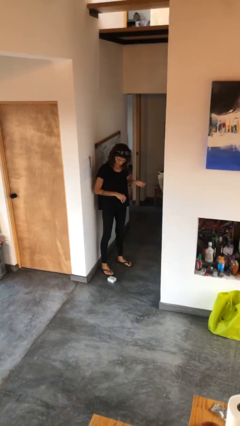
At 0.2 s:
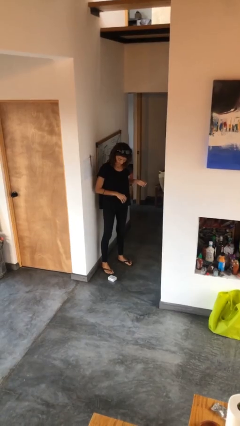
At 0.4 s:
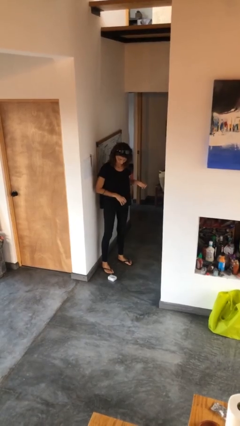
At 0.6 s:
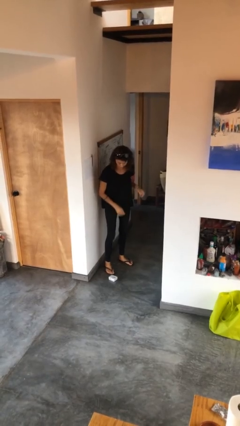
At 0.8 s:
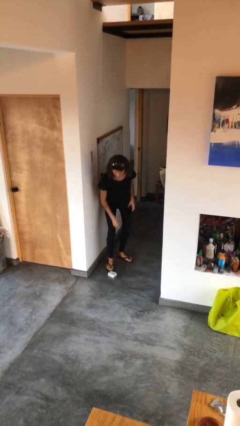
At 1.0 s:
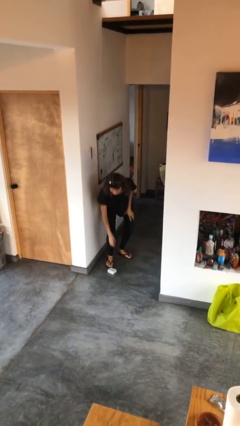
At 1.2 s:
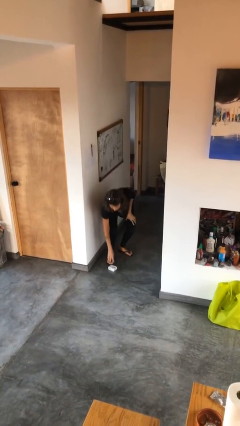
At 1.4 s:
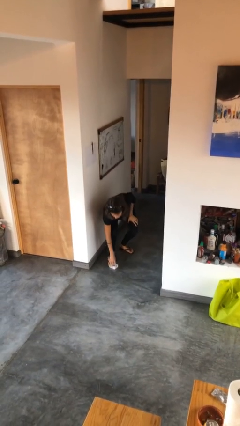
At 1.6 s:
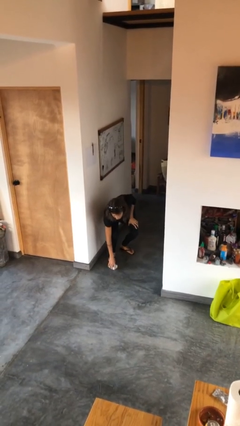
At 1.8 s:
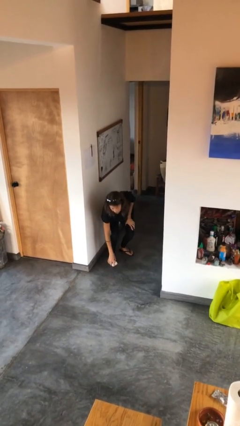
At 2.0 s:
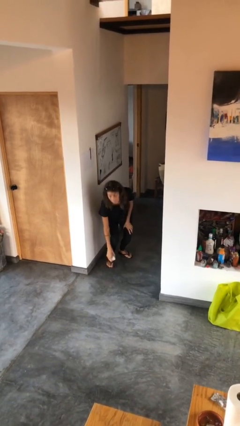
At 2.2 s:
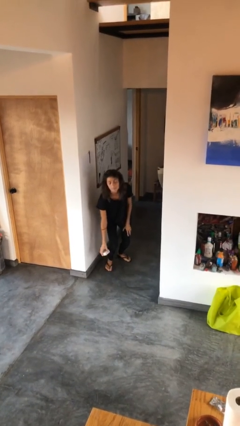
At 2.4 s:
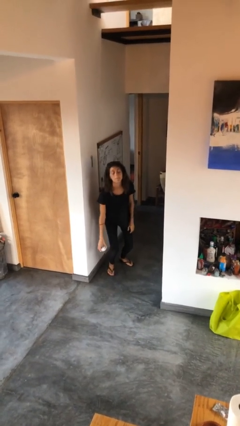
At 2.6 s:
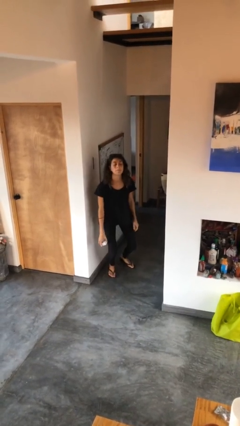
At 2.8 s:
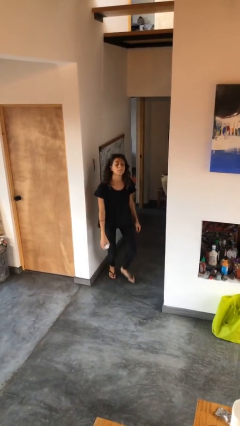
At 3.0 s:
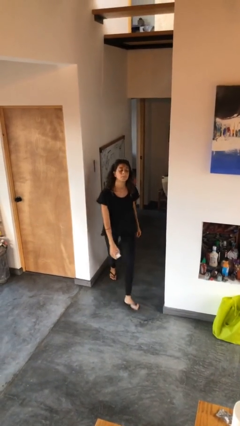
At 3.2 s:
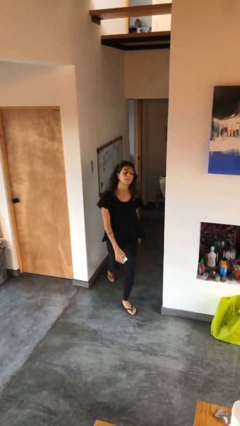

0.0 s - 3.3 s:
person picks up object from floor

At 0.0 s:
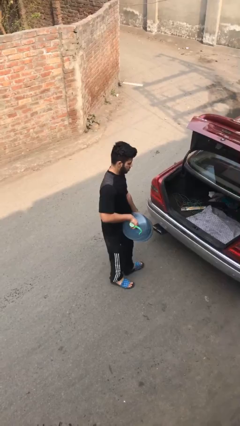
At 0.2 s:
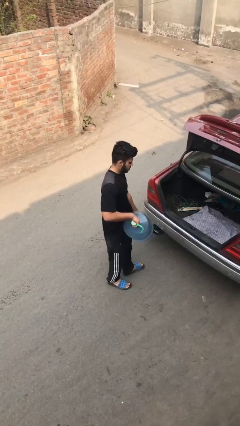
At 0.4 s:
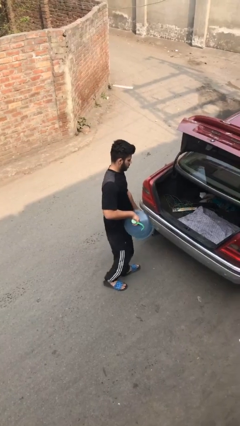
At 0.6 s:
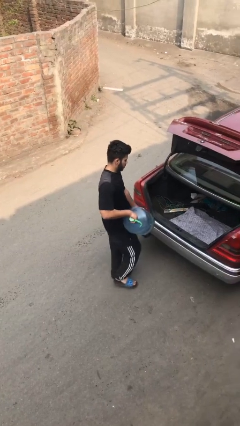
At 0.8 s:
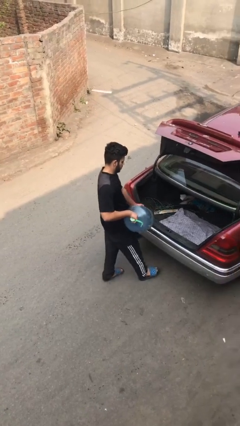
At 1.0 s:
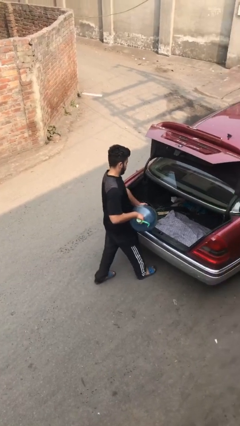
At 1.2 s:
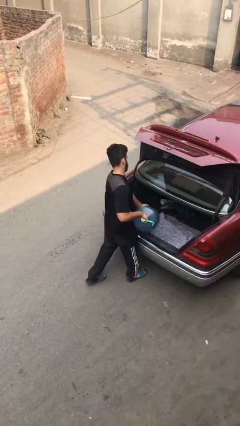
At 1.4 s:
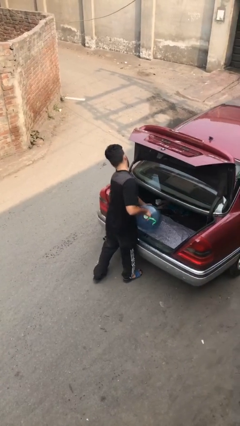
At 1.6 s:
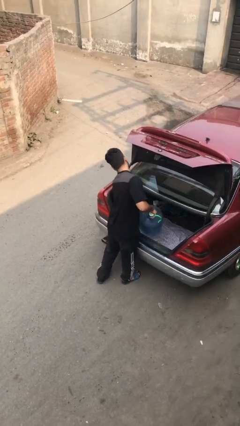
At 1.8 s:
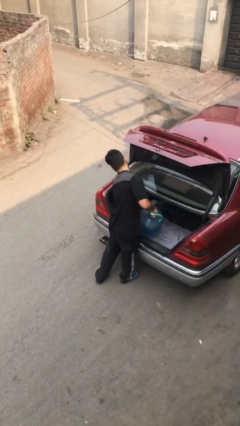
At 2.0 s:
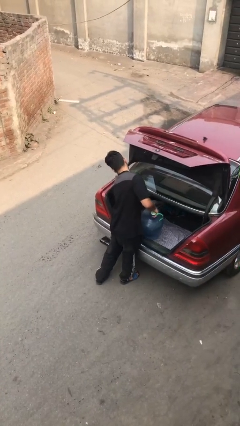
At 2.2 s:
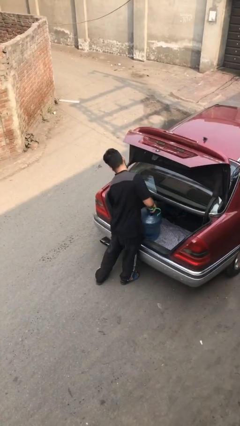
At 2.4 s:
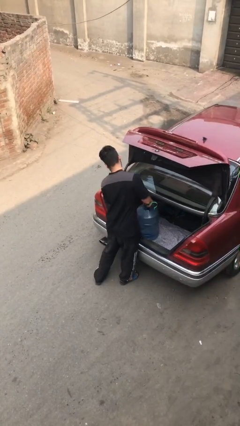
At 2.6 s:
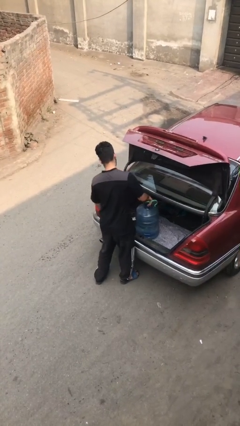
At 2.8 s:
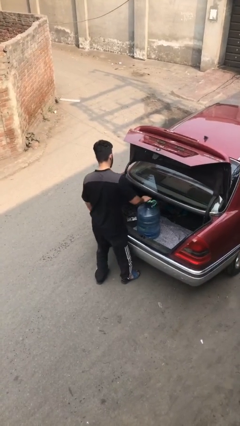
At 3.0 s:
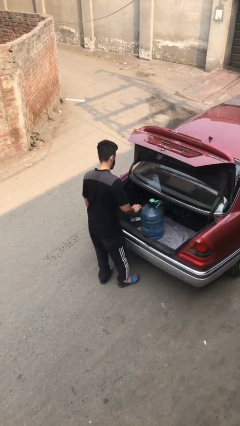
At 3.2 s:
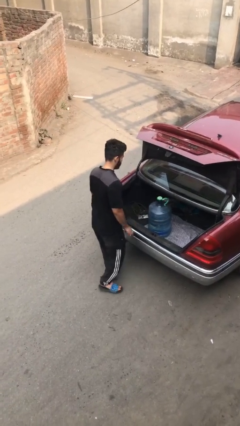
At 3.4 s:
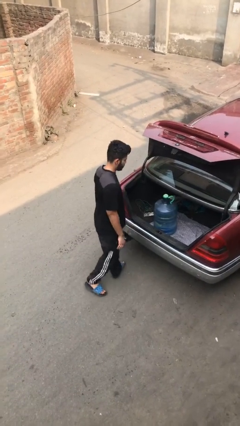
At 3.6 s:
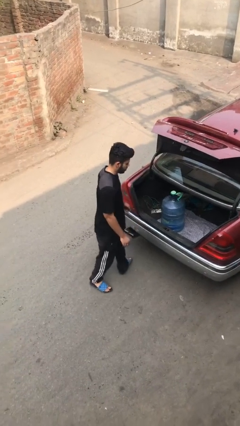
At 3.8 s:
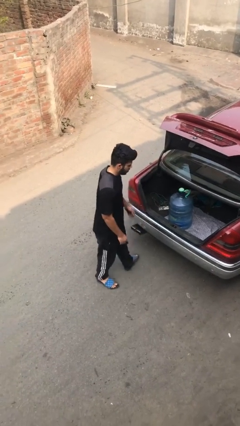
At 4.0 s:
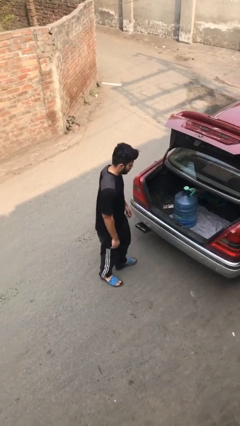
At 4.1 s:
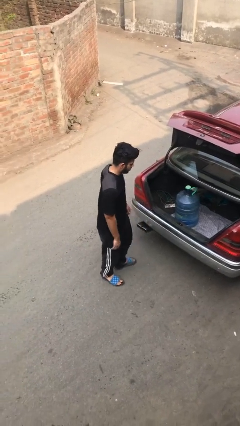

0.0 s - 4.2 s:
person loads car

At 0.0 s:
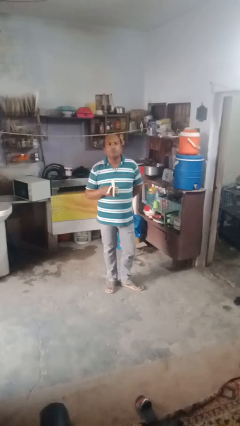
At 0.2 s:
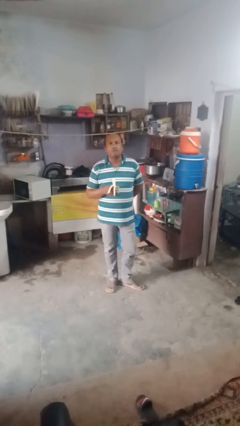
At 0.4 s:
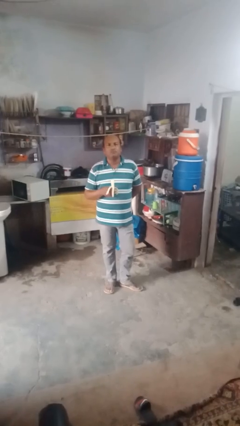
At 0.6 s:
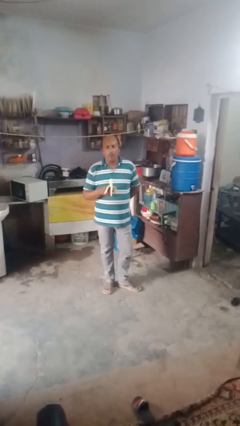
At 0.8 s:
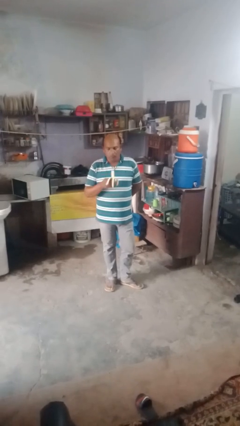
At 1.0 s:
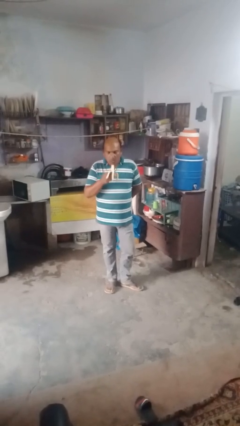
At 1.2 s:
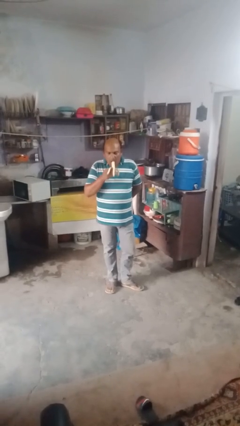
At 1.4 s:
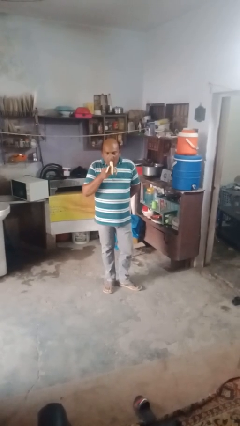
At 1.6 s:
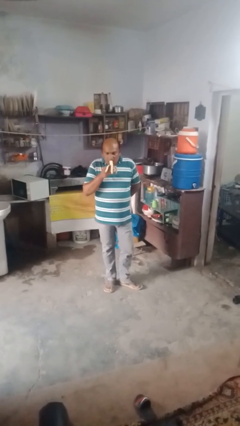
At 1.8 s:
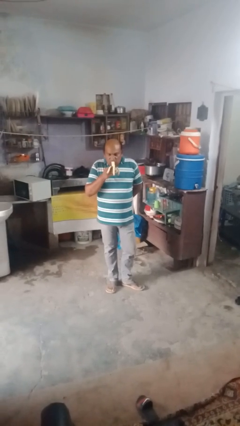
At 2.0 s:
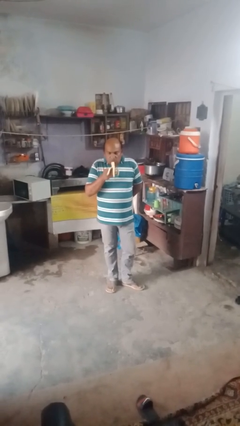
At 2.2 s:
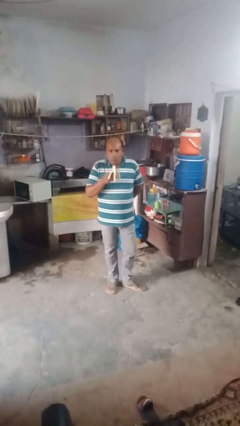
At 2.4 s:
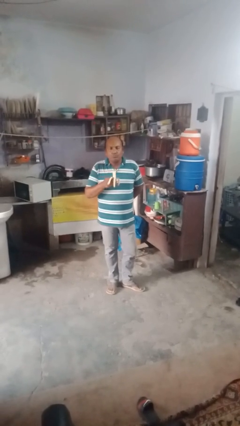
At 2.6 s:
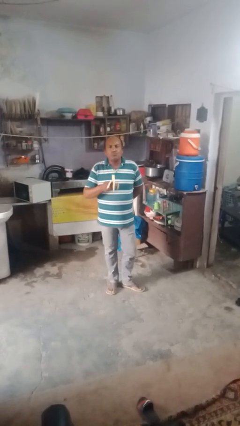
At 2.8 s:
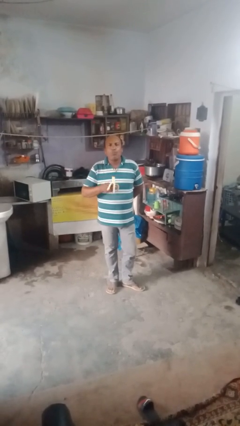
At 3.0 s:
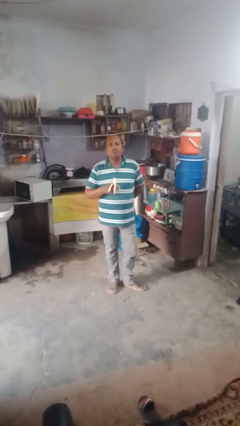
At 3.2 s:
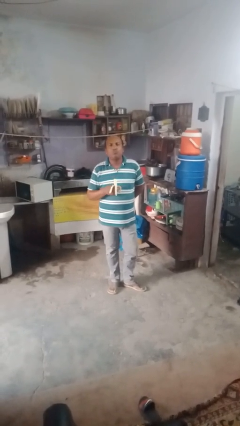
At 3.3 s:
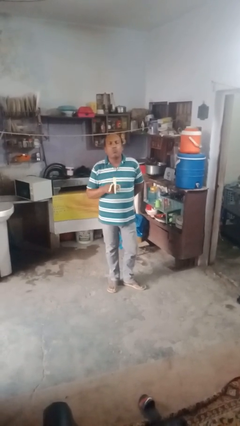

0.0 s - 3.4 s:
person eats banana

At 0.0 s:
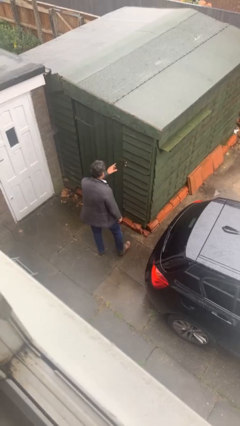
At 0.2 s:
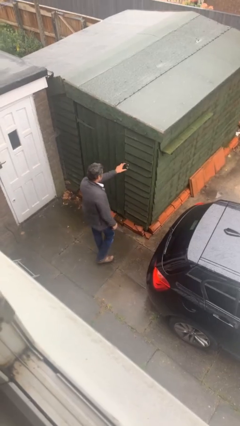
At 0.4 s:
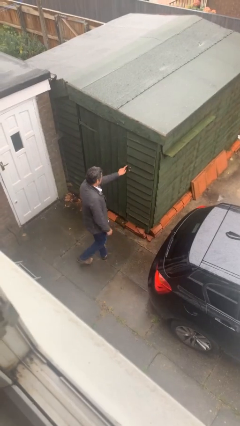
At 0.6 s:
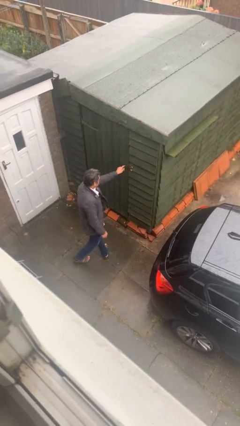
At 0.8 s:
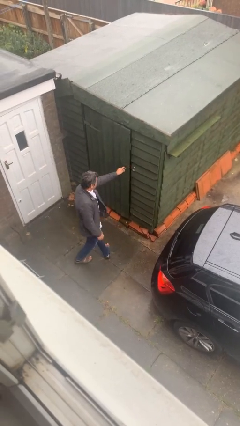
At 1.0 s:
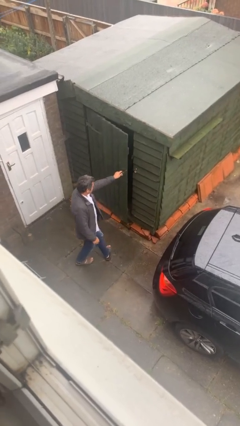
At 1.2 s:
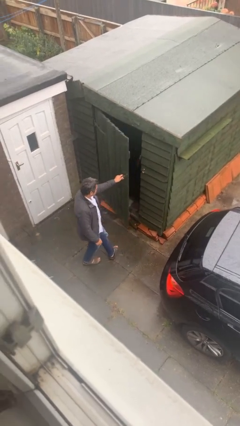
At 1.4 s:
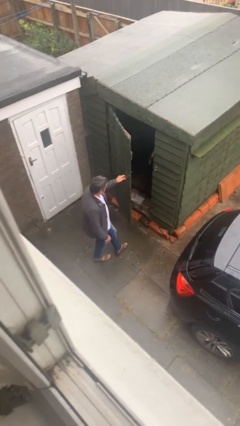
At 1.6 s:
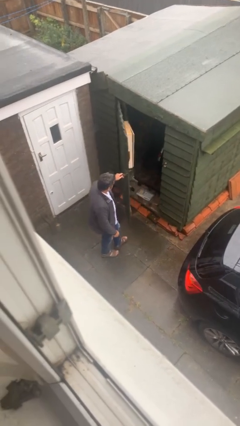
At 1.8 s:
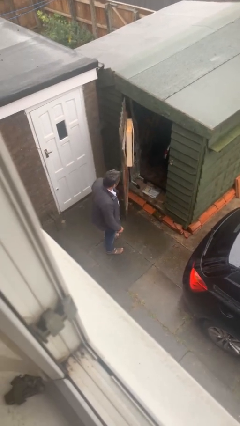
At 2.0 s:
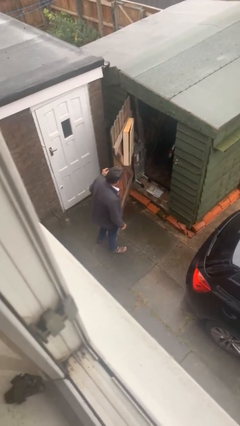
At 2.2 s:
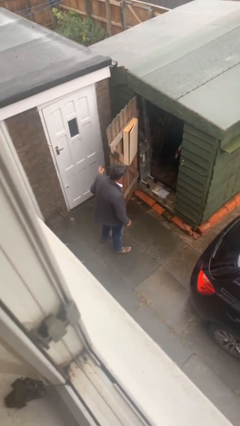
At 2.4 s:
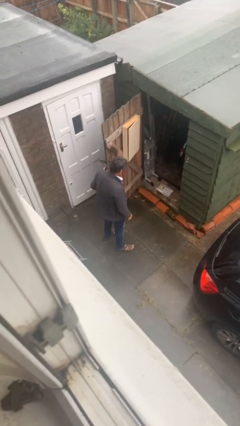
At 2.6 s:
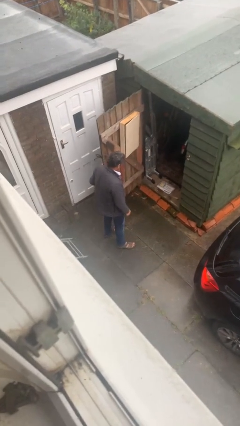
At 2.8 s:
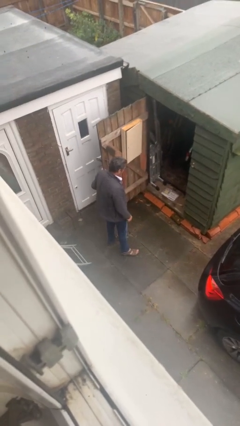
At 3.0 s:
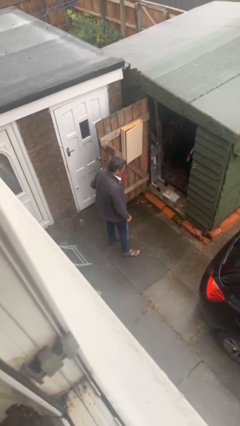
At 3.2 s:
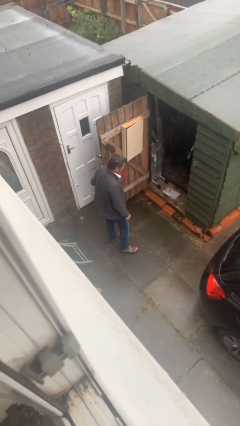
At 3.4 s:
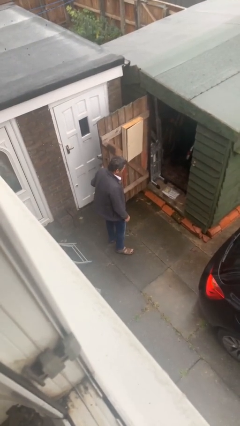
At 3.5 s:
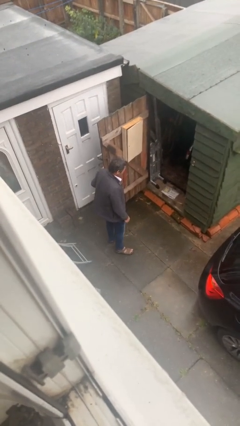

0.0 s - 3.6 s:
person opens facility door

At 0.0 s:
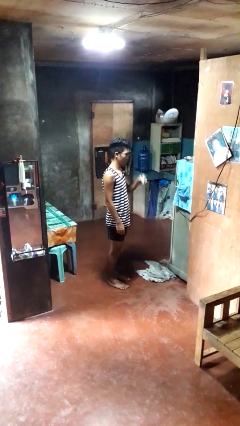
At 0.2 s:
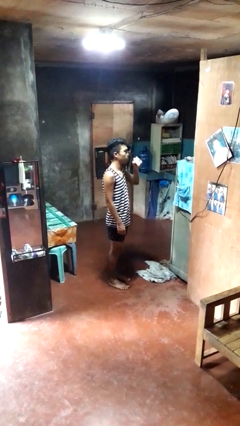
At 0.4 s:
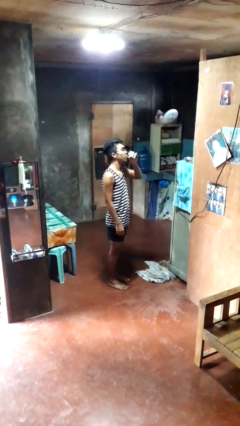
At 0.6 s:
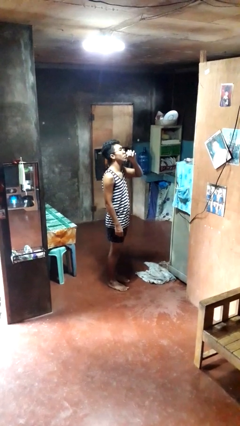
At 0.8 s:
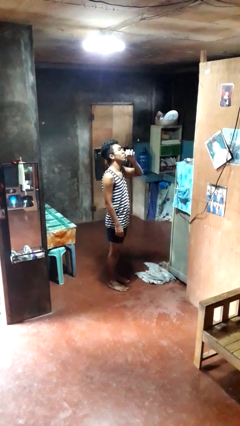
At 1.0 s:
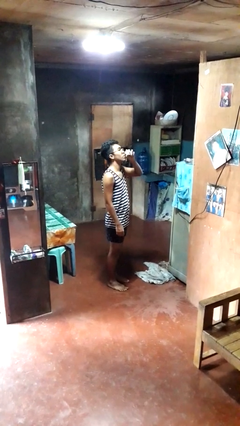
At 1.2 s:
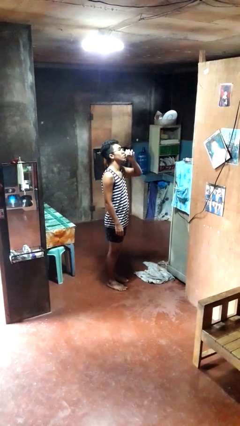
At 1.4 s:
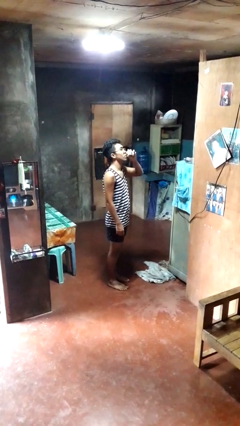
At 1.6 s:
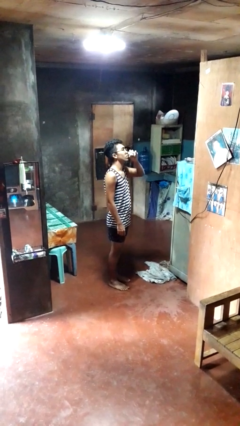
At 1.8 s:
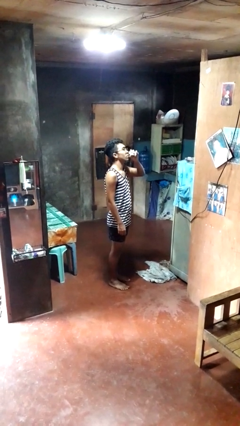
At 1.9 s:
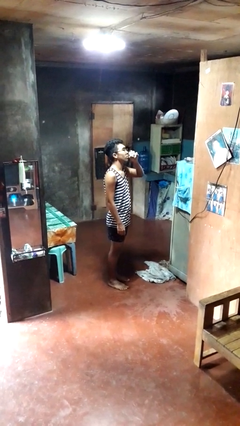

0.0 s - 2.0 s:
person drinks from beverage can

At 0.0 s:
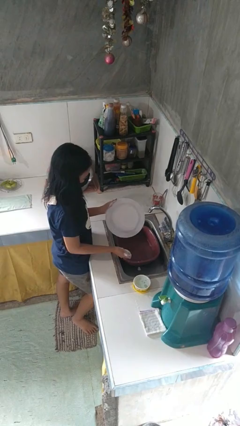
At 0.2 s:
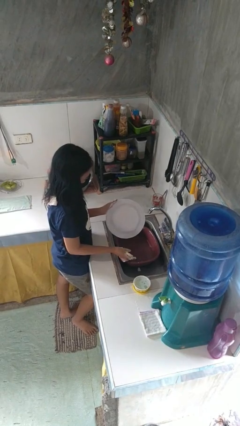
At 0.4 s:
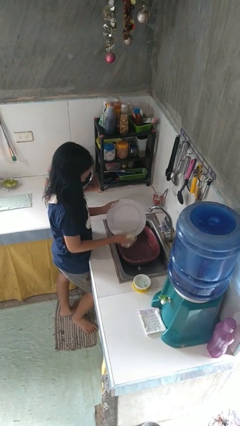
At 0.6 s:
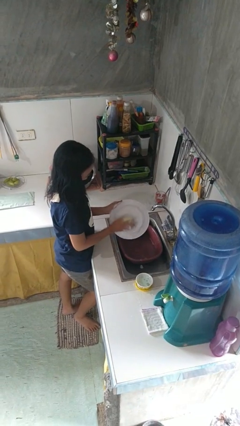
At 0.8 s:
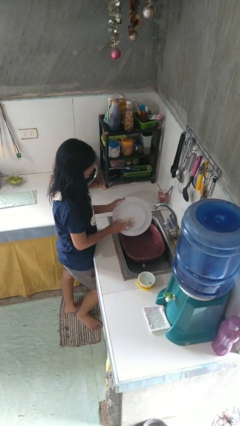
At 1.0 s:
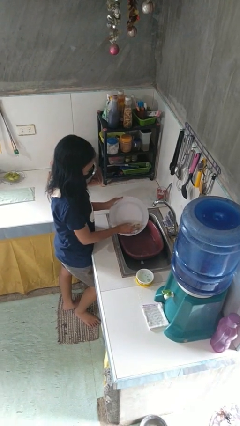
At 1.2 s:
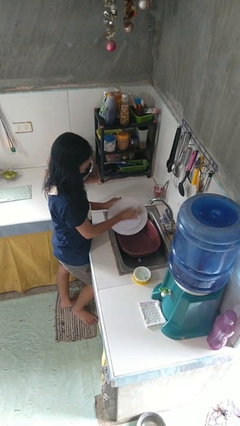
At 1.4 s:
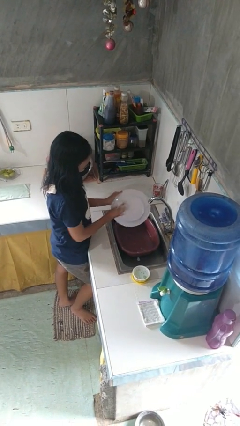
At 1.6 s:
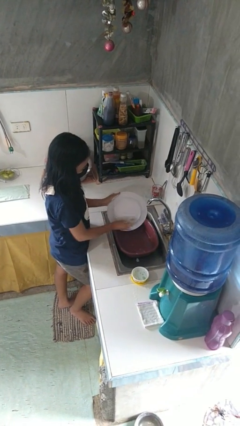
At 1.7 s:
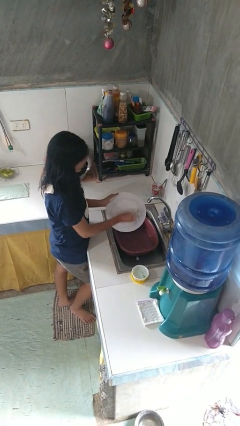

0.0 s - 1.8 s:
person washes dish
